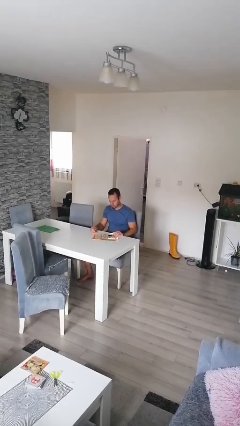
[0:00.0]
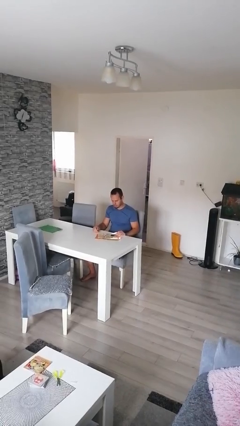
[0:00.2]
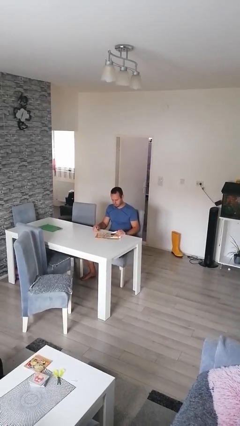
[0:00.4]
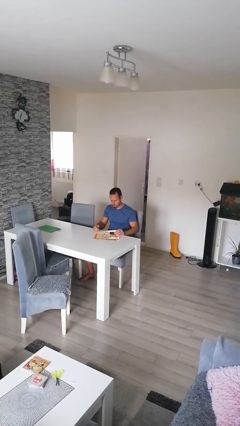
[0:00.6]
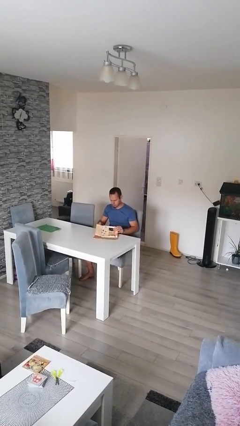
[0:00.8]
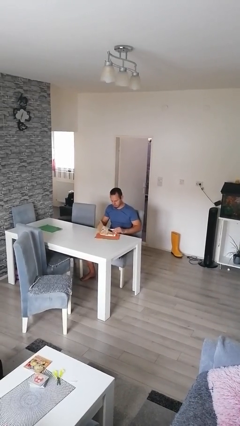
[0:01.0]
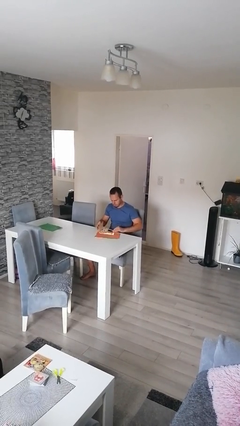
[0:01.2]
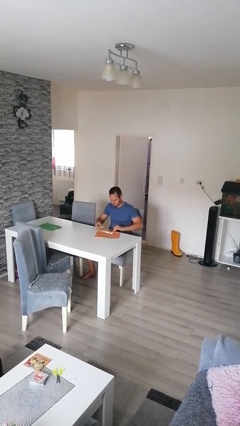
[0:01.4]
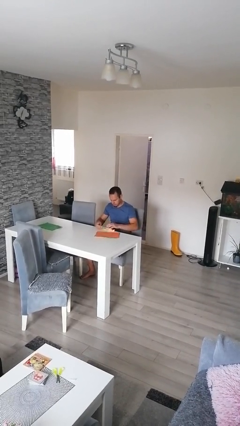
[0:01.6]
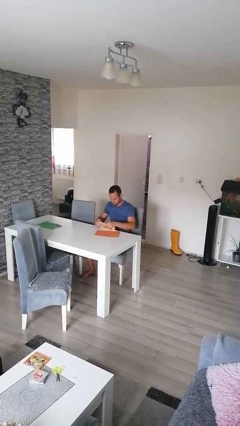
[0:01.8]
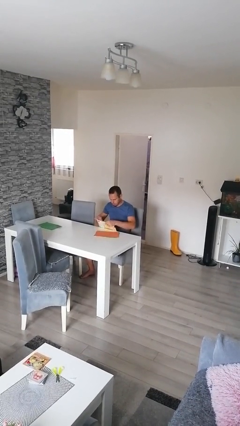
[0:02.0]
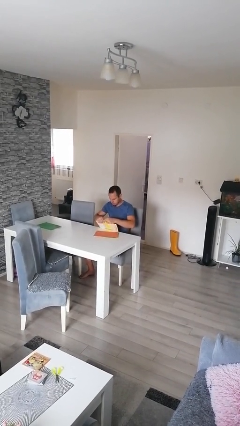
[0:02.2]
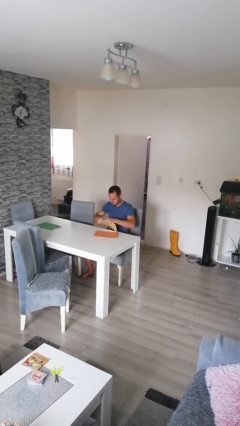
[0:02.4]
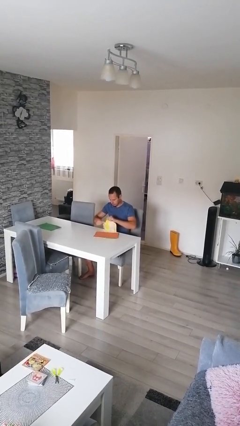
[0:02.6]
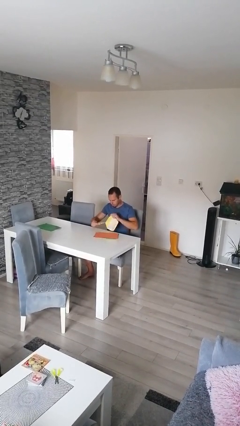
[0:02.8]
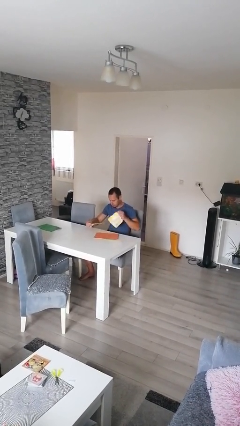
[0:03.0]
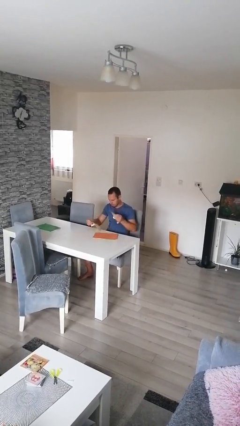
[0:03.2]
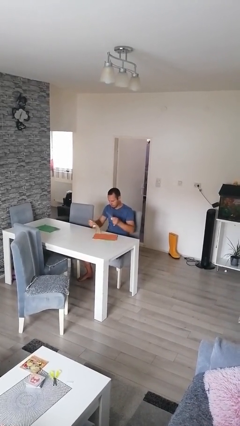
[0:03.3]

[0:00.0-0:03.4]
person tears paper

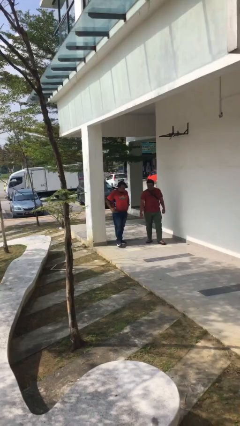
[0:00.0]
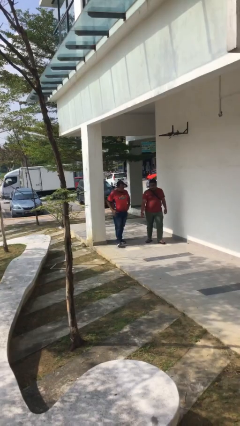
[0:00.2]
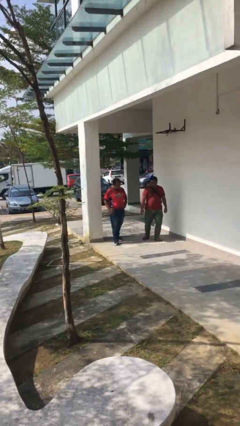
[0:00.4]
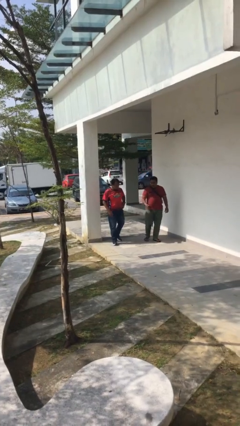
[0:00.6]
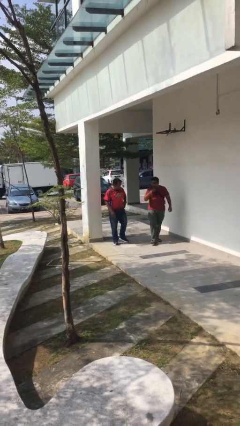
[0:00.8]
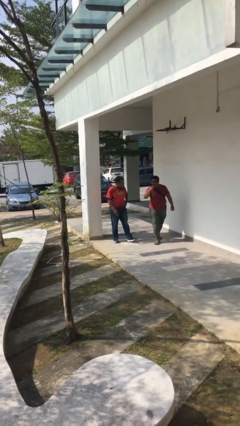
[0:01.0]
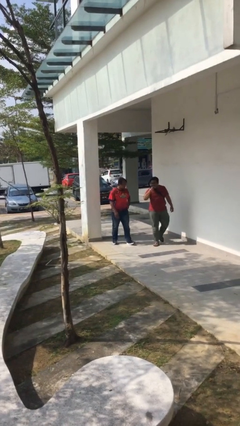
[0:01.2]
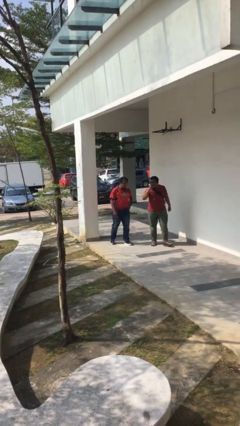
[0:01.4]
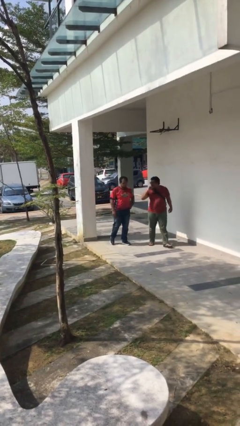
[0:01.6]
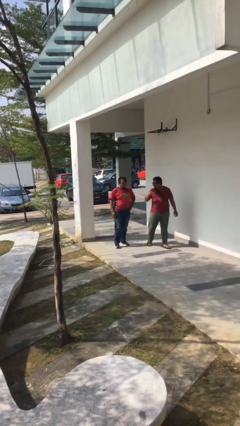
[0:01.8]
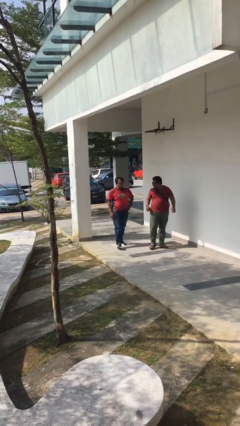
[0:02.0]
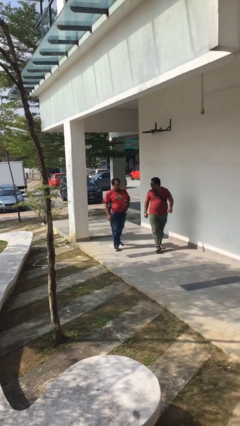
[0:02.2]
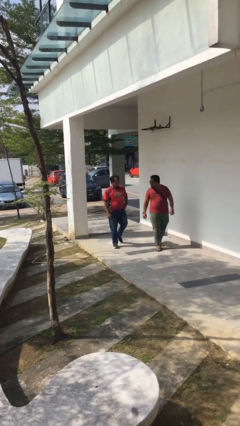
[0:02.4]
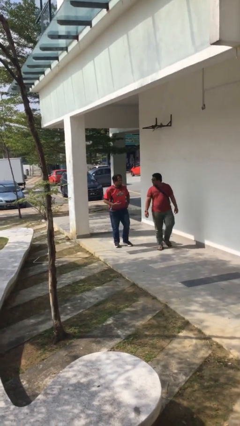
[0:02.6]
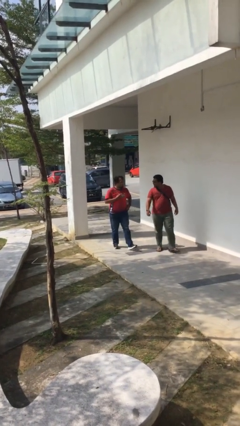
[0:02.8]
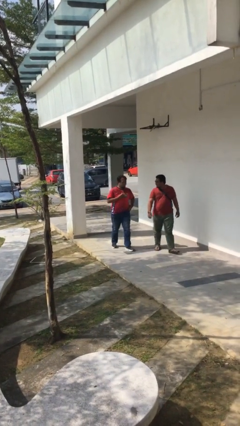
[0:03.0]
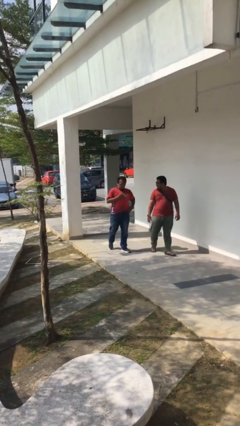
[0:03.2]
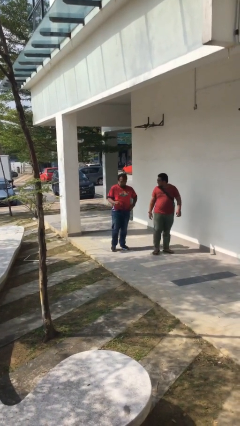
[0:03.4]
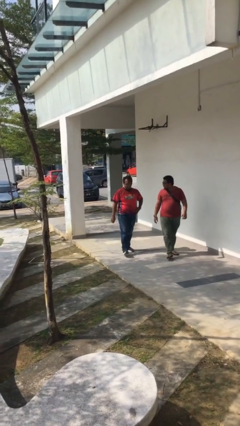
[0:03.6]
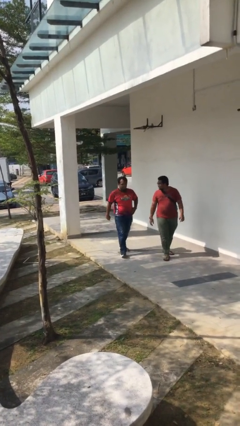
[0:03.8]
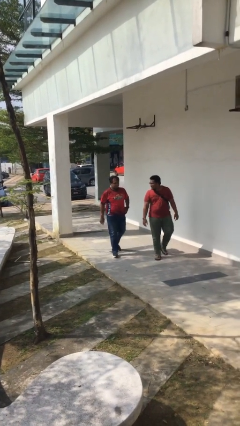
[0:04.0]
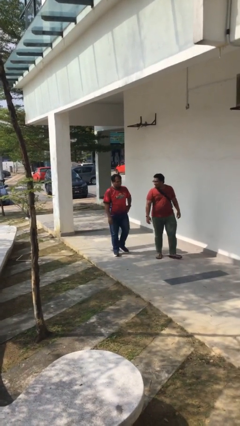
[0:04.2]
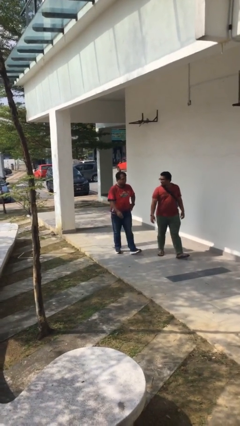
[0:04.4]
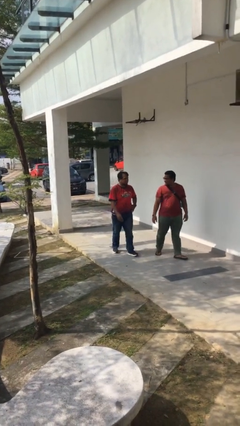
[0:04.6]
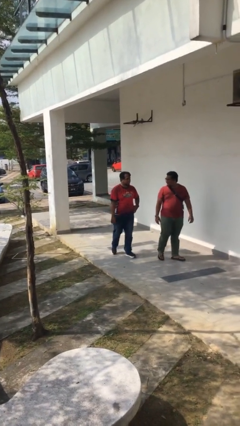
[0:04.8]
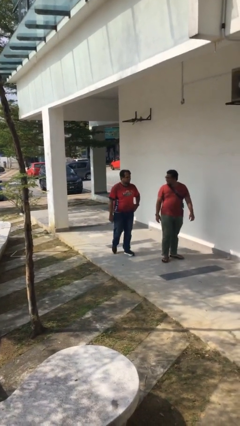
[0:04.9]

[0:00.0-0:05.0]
person talks to person

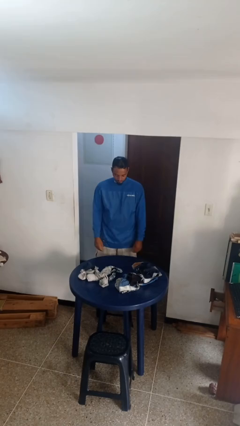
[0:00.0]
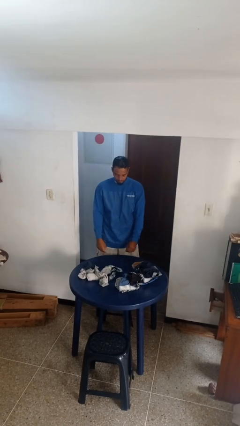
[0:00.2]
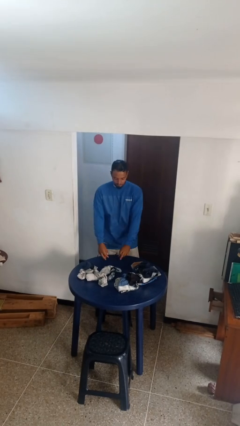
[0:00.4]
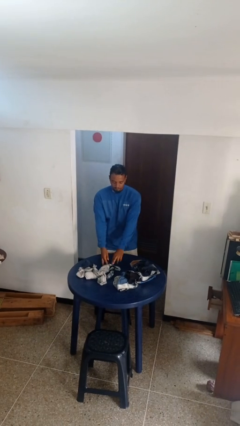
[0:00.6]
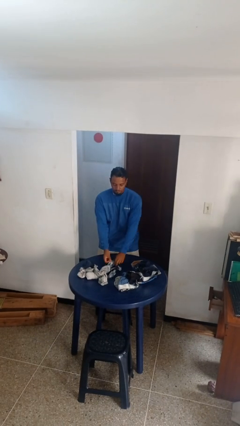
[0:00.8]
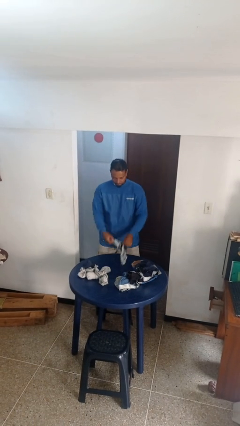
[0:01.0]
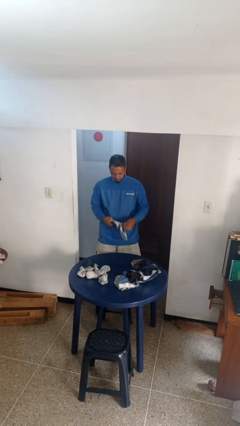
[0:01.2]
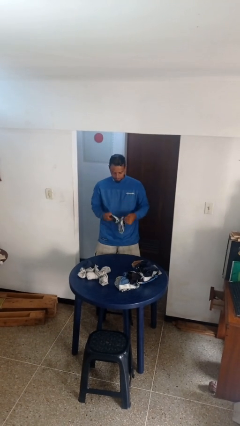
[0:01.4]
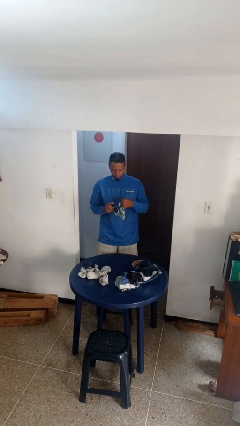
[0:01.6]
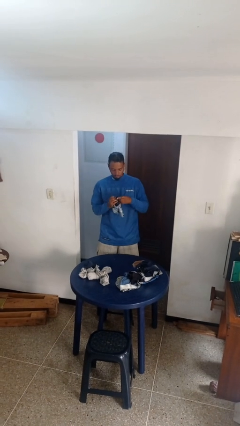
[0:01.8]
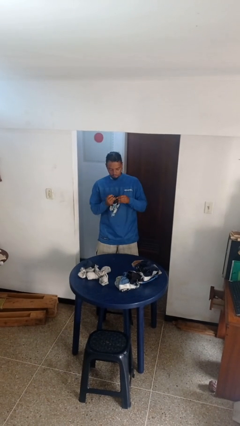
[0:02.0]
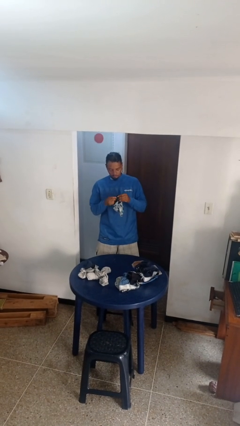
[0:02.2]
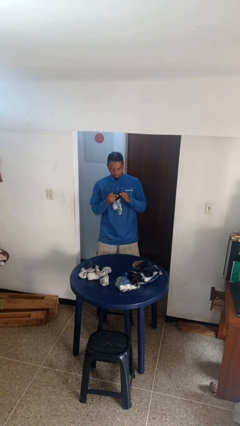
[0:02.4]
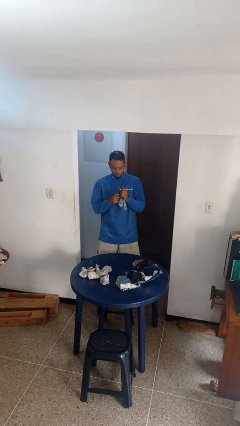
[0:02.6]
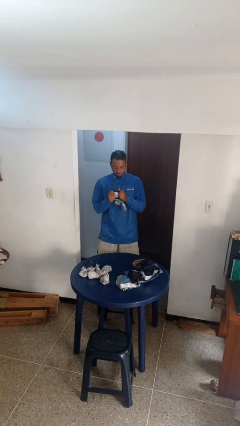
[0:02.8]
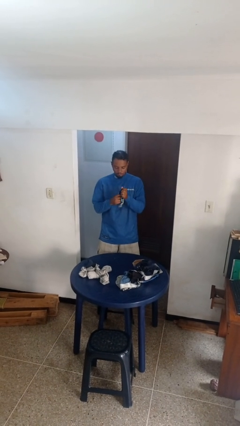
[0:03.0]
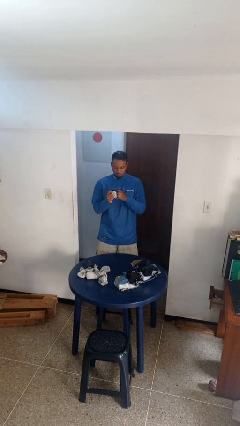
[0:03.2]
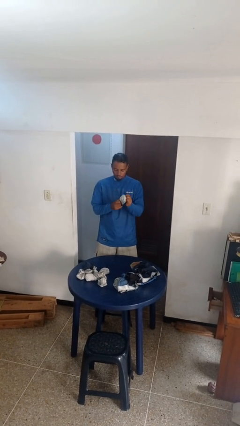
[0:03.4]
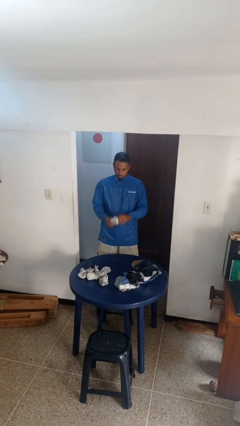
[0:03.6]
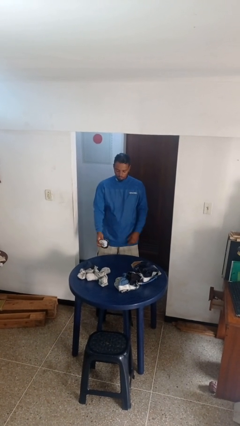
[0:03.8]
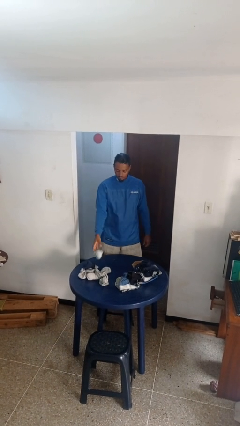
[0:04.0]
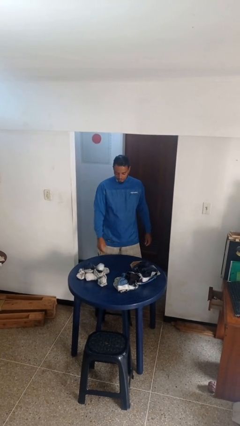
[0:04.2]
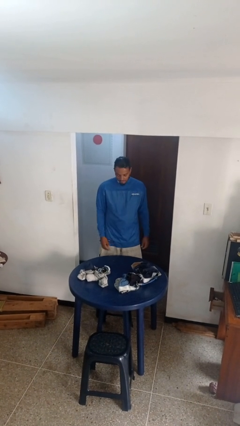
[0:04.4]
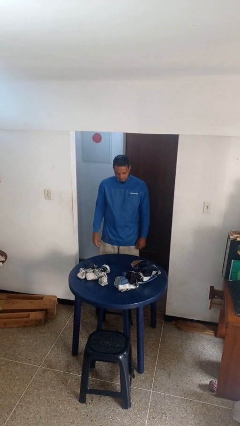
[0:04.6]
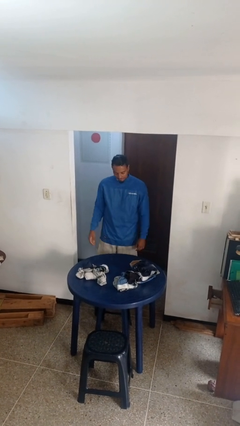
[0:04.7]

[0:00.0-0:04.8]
person folds socks

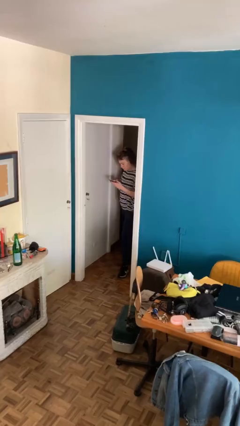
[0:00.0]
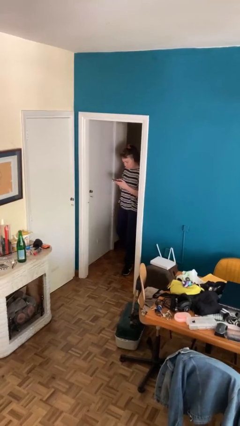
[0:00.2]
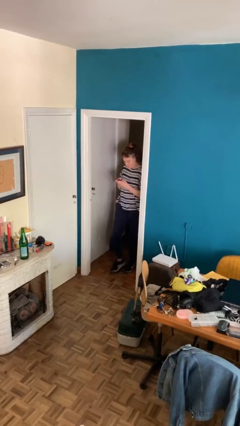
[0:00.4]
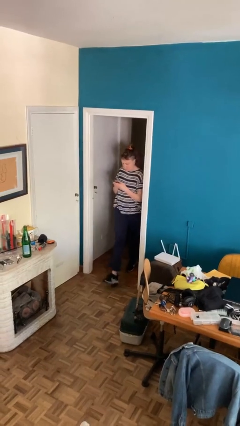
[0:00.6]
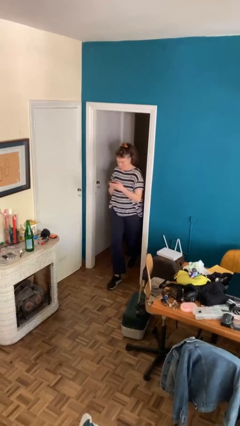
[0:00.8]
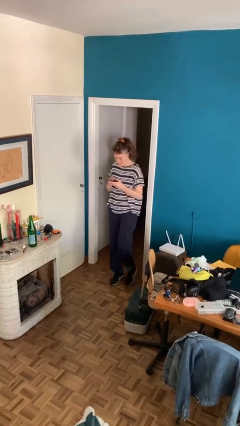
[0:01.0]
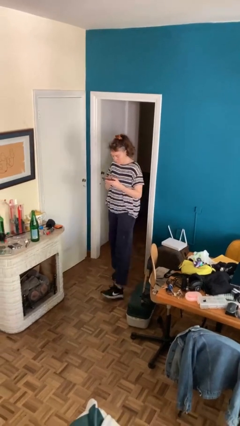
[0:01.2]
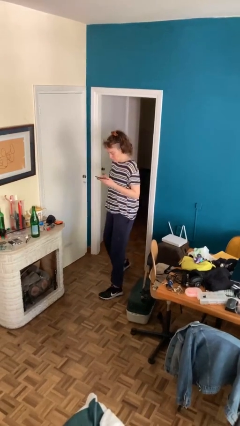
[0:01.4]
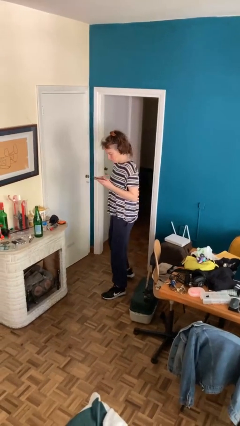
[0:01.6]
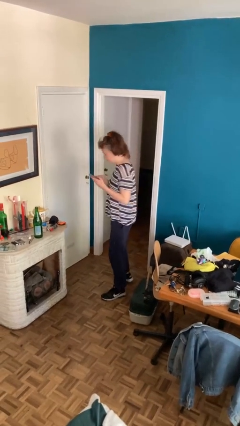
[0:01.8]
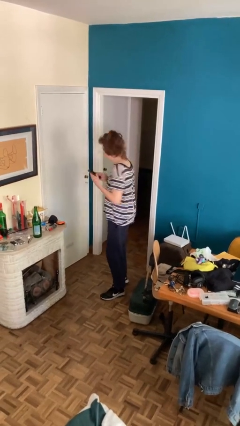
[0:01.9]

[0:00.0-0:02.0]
person exits scene through structure

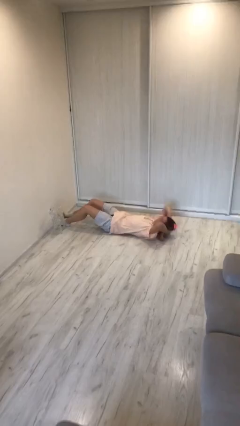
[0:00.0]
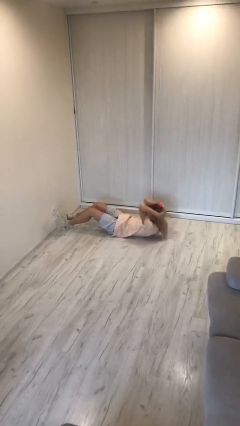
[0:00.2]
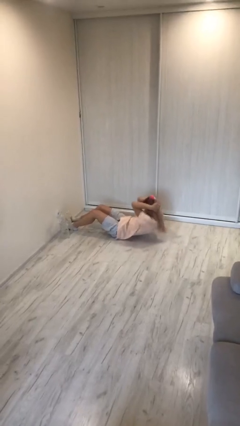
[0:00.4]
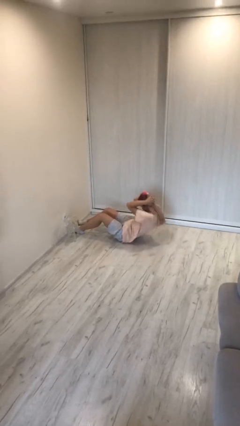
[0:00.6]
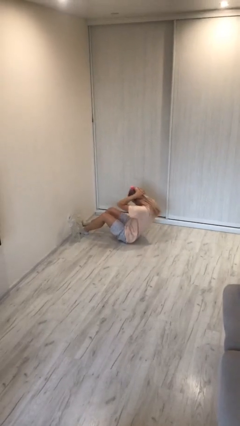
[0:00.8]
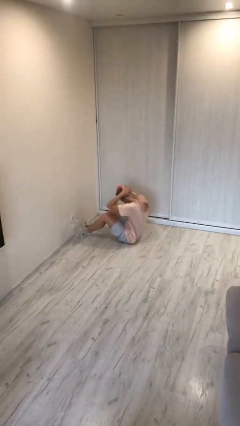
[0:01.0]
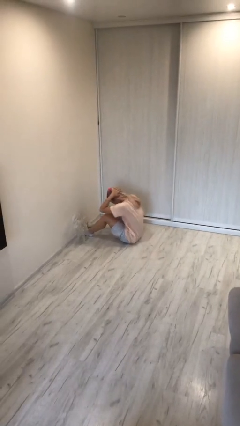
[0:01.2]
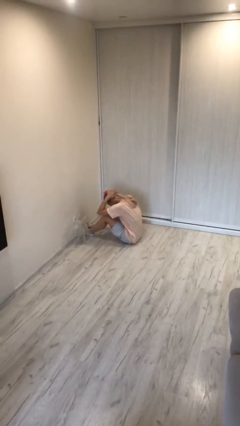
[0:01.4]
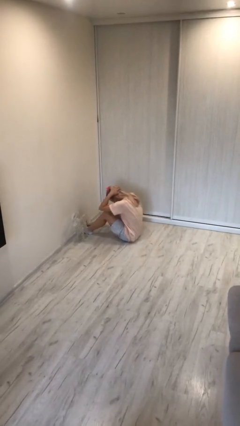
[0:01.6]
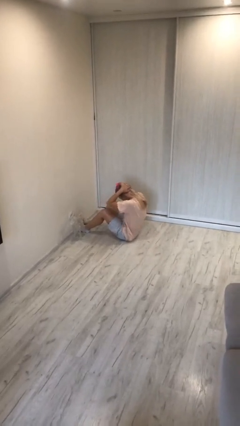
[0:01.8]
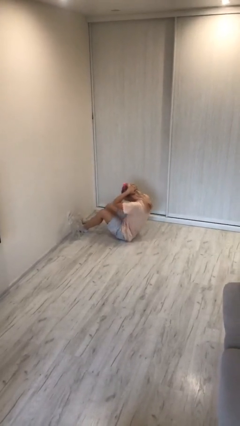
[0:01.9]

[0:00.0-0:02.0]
person exercises with situp

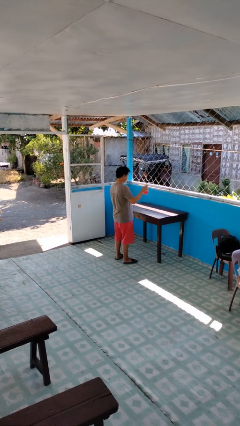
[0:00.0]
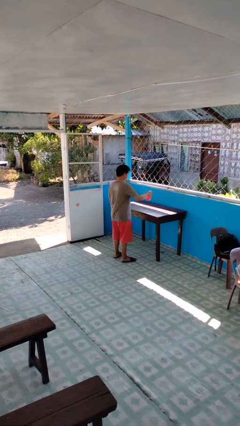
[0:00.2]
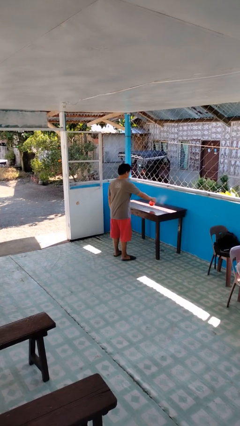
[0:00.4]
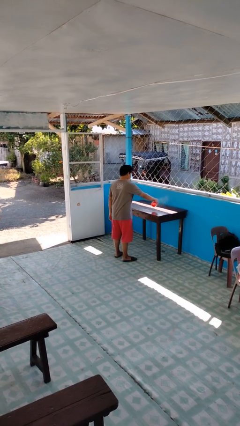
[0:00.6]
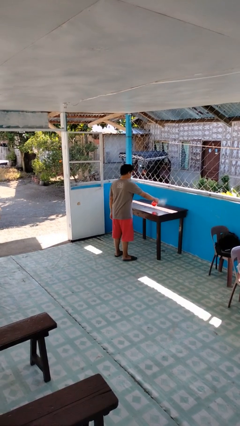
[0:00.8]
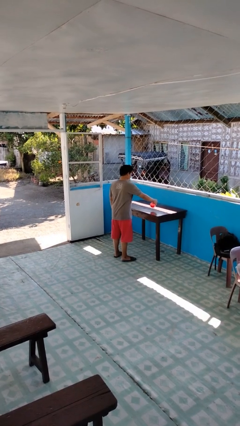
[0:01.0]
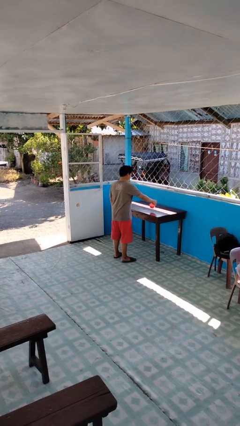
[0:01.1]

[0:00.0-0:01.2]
person sprays from bottle
